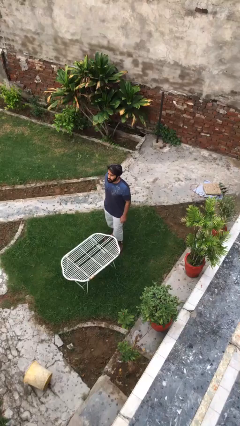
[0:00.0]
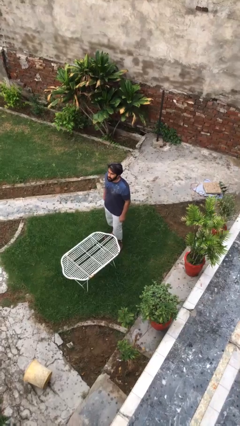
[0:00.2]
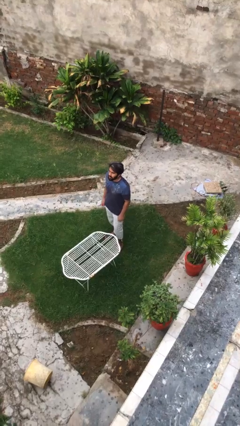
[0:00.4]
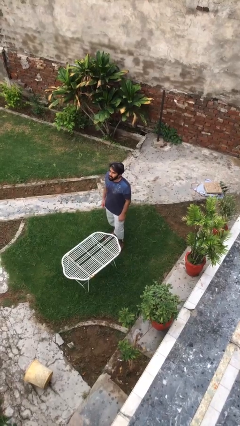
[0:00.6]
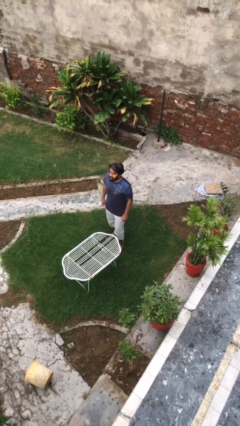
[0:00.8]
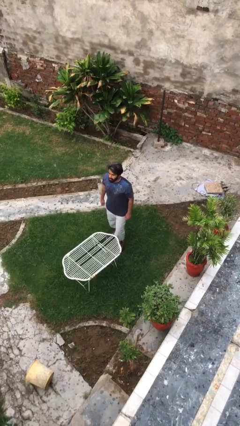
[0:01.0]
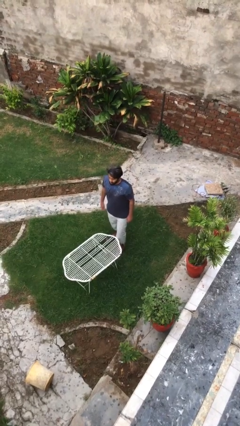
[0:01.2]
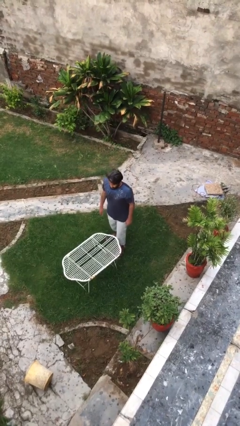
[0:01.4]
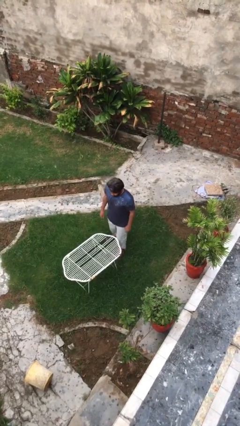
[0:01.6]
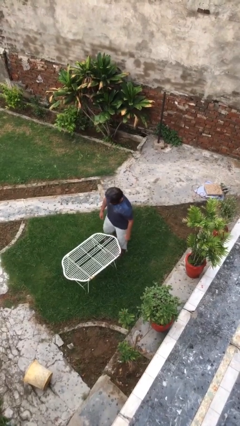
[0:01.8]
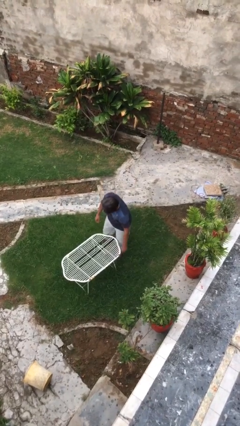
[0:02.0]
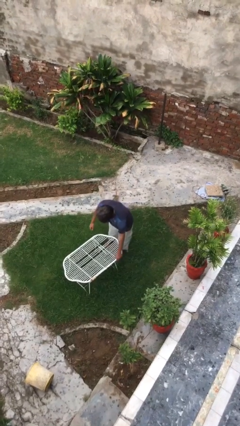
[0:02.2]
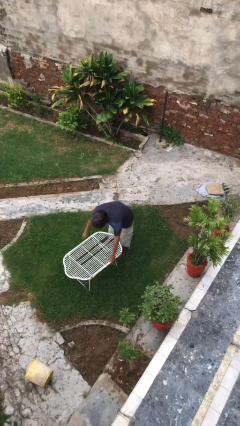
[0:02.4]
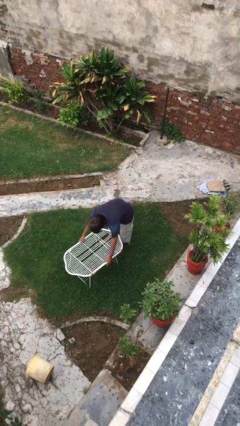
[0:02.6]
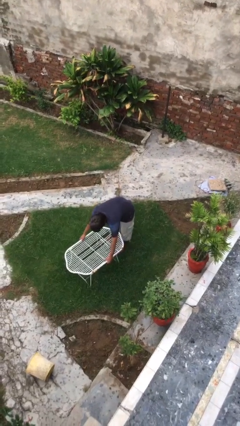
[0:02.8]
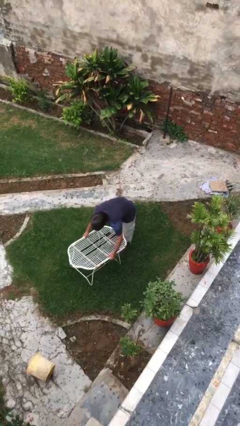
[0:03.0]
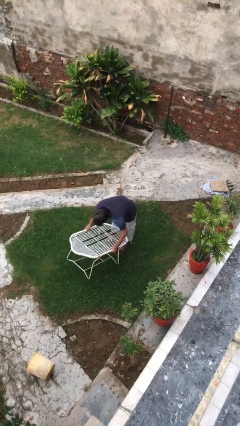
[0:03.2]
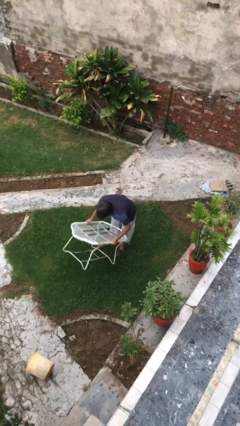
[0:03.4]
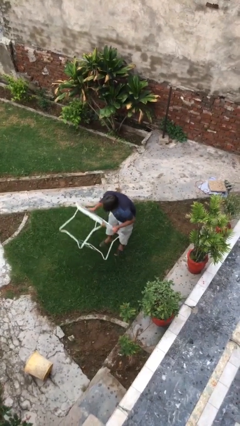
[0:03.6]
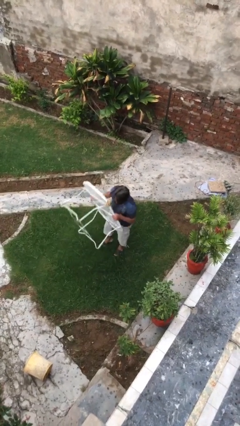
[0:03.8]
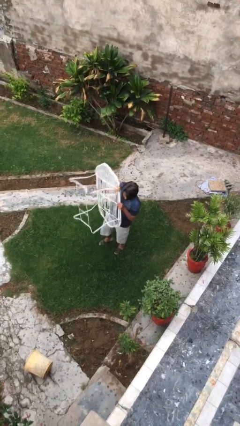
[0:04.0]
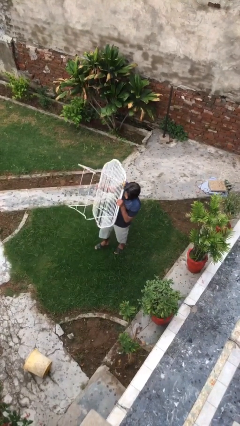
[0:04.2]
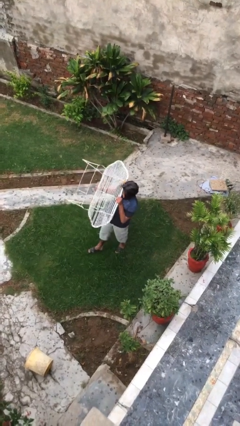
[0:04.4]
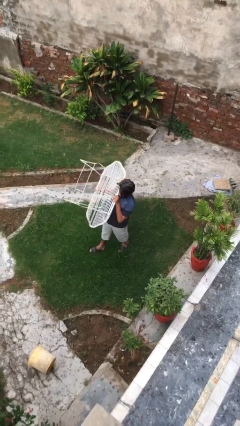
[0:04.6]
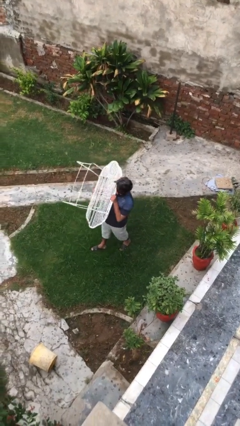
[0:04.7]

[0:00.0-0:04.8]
person picks up object from floor

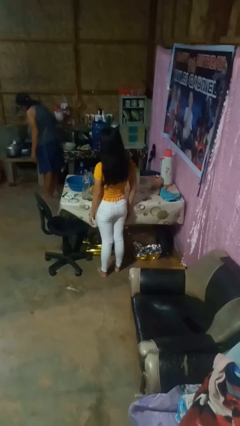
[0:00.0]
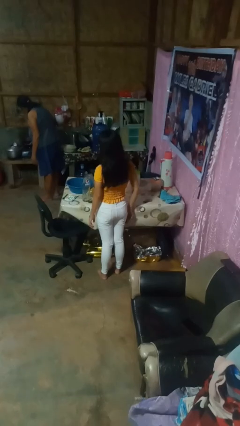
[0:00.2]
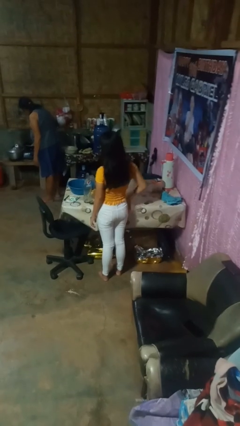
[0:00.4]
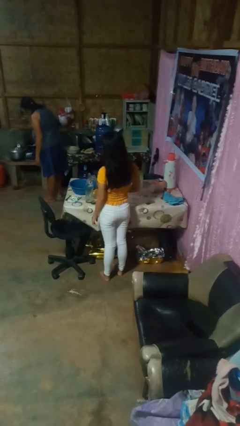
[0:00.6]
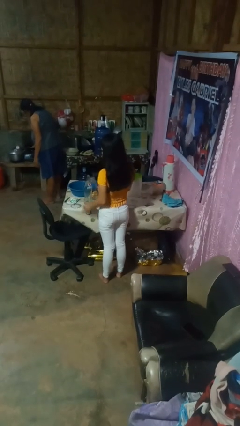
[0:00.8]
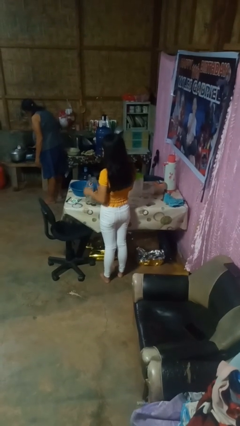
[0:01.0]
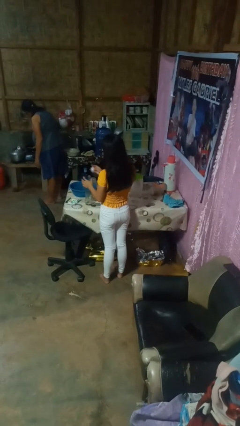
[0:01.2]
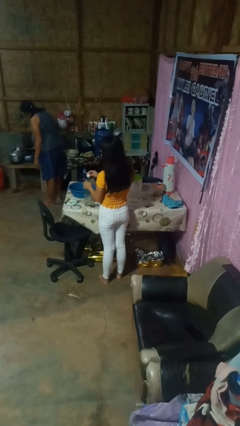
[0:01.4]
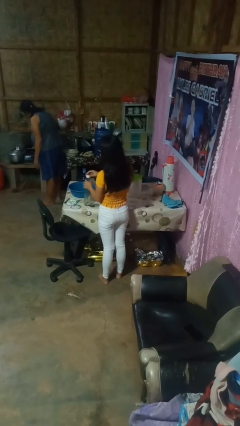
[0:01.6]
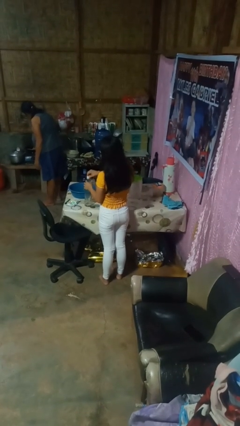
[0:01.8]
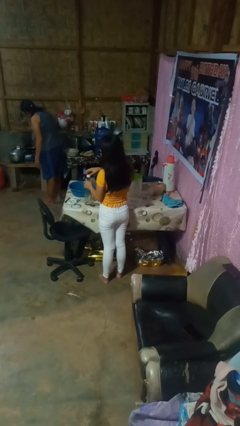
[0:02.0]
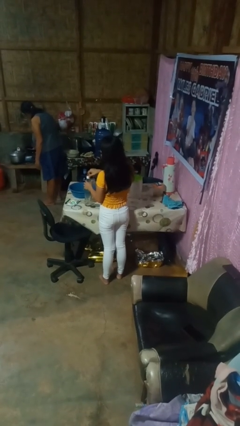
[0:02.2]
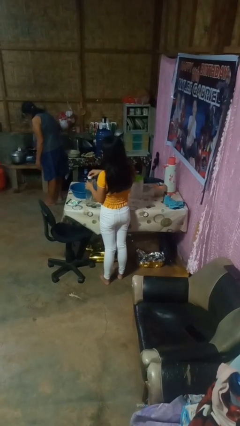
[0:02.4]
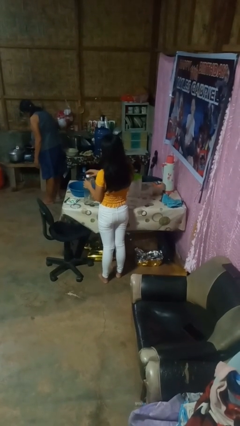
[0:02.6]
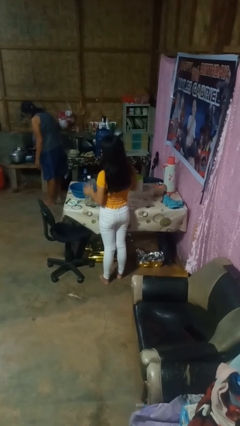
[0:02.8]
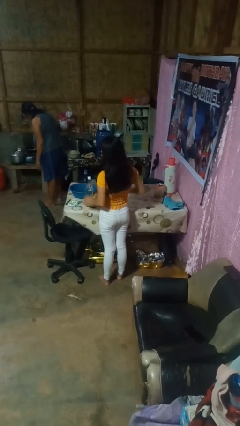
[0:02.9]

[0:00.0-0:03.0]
person screws lid to bottle

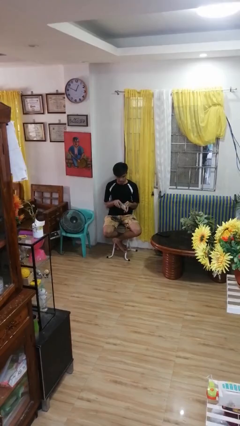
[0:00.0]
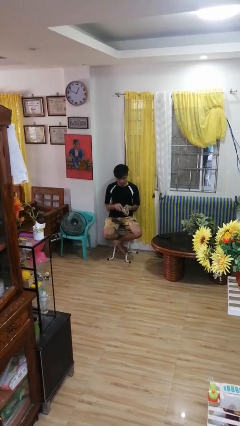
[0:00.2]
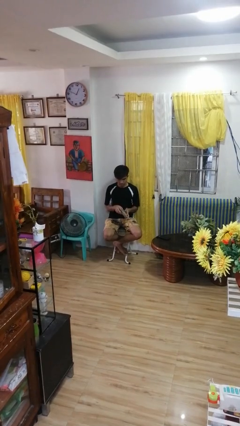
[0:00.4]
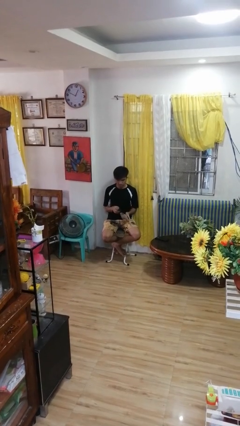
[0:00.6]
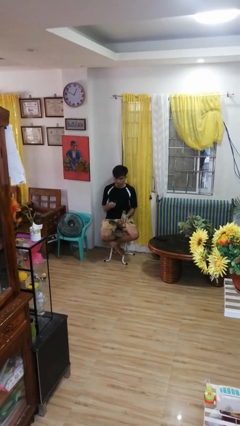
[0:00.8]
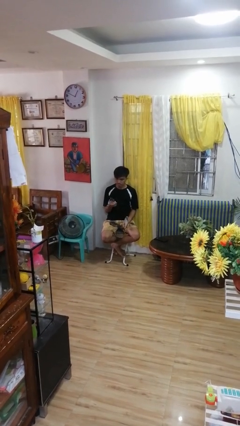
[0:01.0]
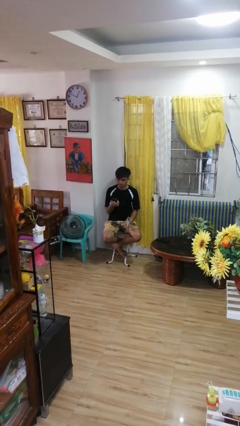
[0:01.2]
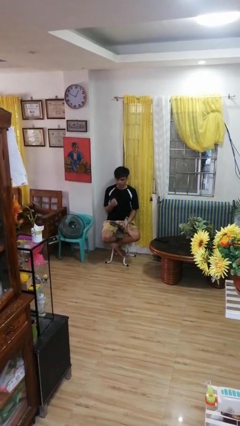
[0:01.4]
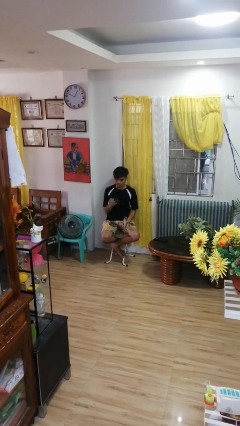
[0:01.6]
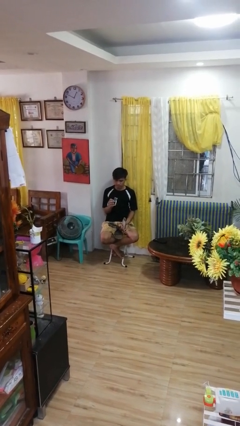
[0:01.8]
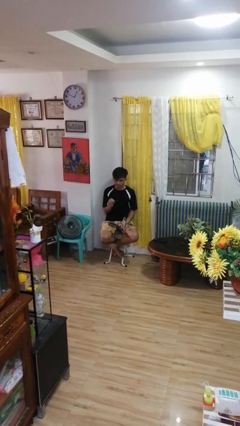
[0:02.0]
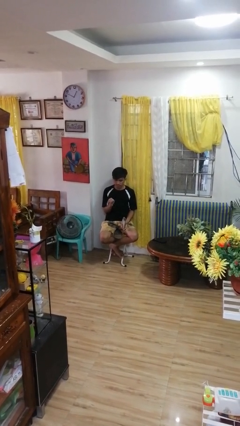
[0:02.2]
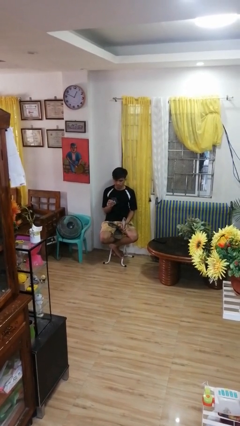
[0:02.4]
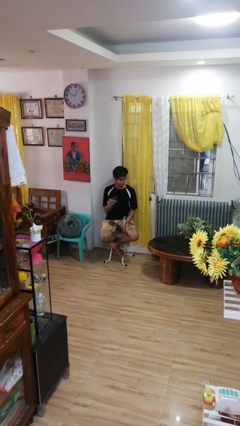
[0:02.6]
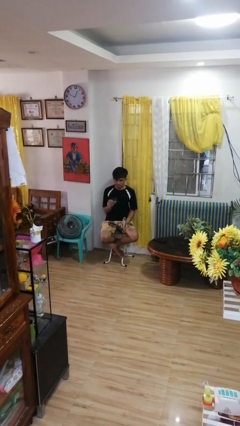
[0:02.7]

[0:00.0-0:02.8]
person takes object from purse

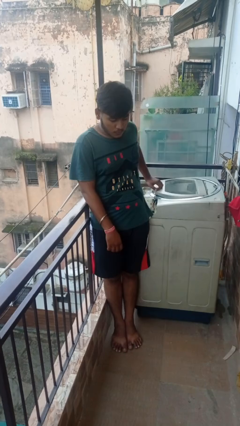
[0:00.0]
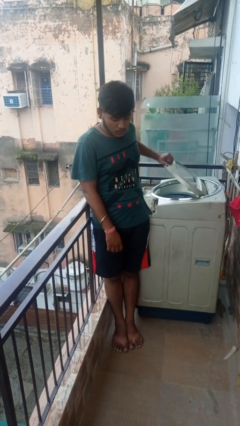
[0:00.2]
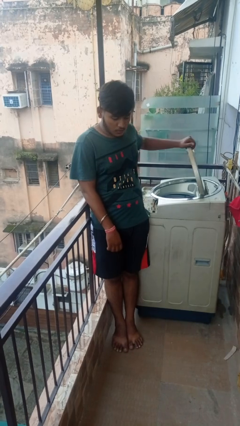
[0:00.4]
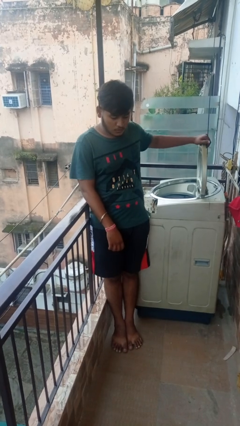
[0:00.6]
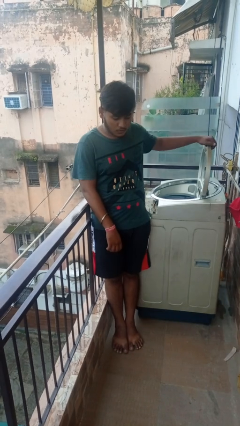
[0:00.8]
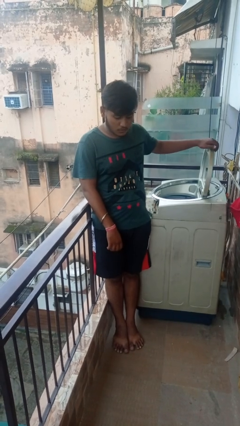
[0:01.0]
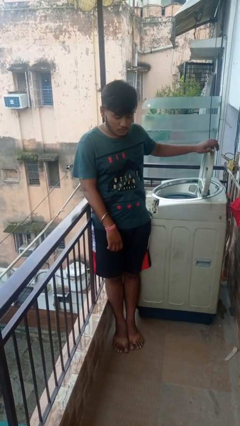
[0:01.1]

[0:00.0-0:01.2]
person opens clothes washer

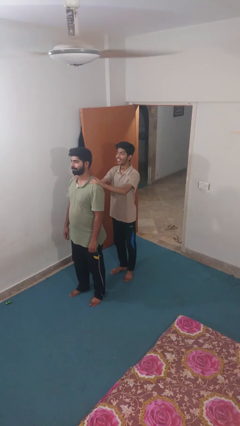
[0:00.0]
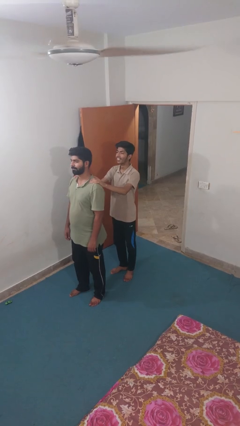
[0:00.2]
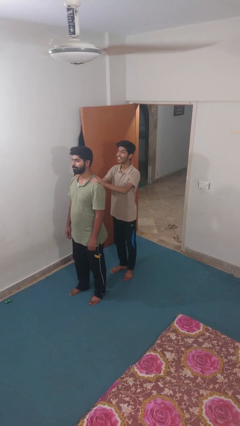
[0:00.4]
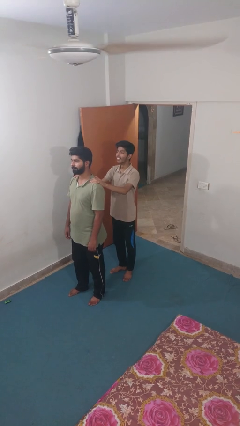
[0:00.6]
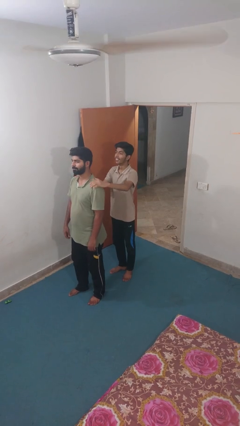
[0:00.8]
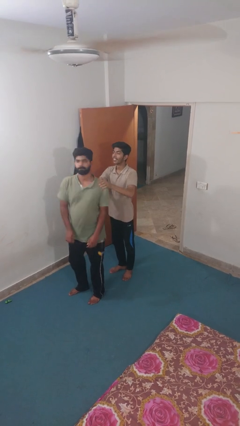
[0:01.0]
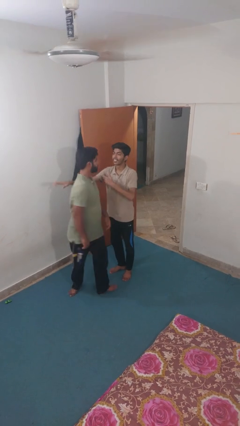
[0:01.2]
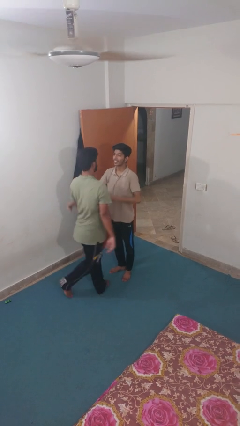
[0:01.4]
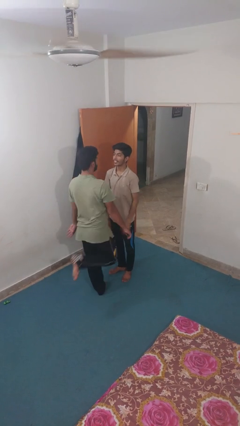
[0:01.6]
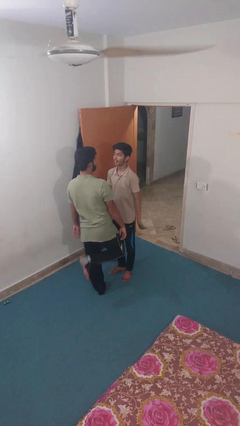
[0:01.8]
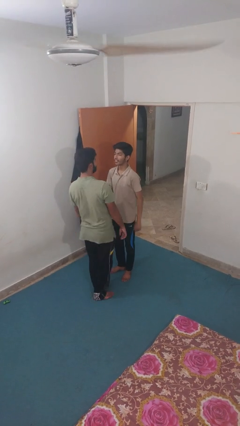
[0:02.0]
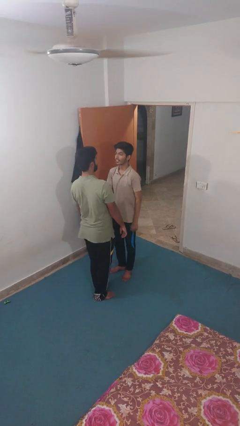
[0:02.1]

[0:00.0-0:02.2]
person spins person around

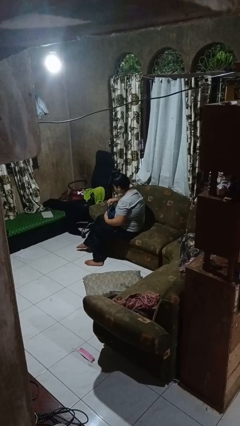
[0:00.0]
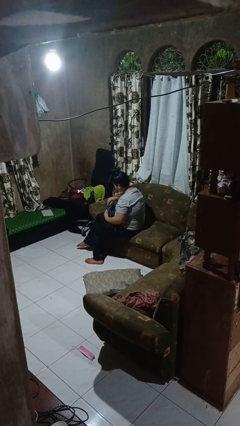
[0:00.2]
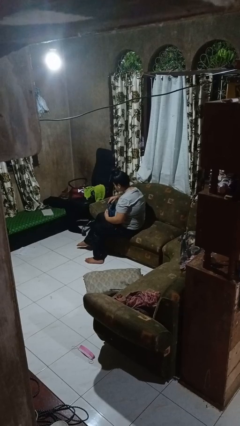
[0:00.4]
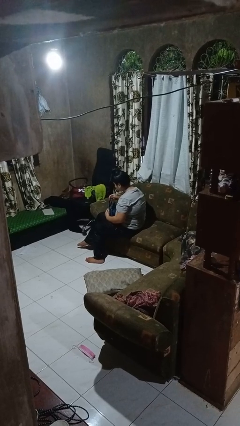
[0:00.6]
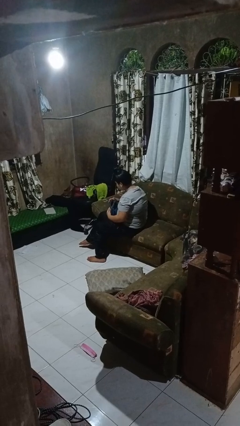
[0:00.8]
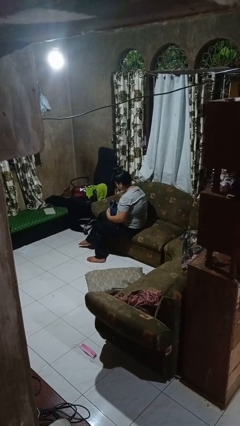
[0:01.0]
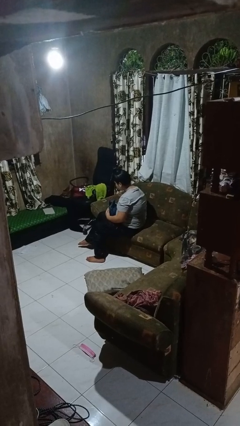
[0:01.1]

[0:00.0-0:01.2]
person puts object into purse

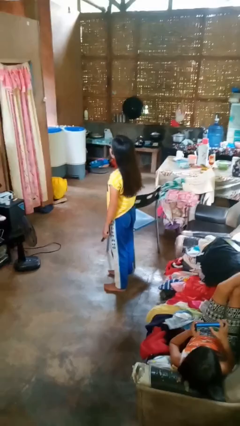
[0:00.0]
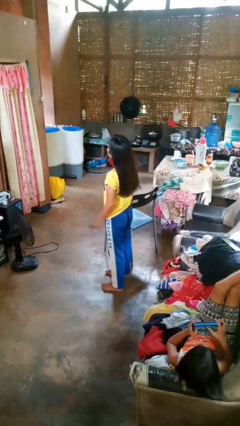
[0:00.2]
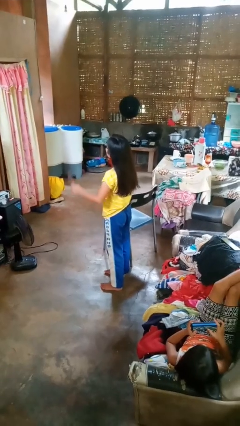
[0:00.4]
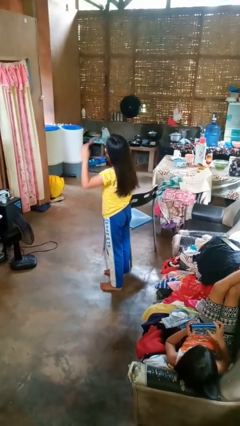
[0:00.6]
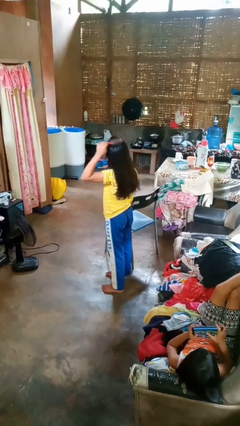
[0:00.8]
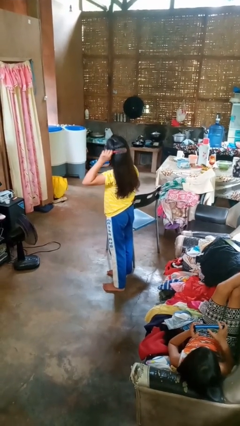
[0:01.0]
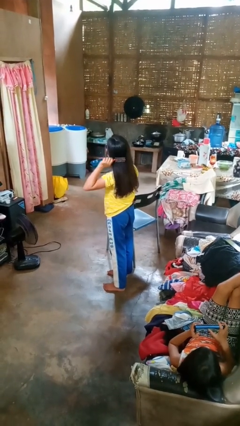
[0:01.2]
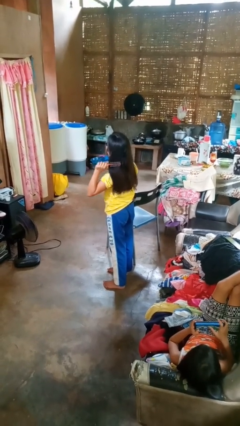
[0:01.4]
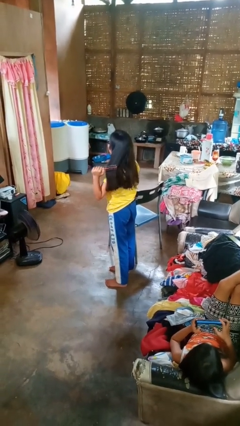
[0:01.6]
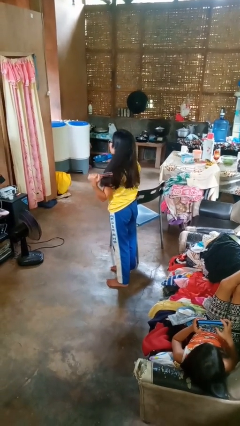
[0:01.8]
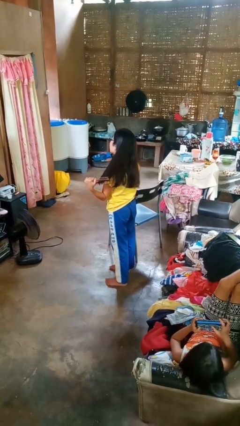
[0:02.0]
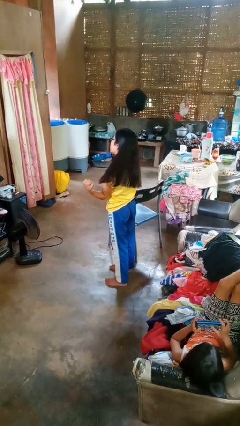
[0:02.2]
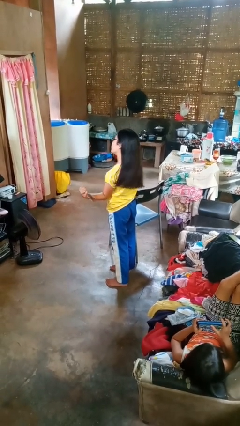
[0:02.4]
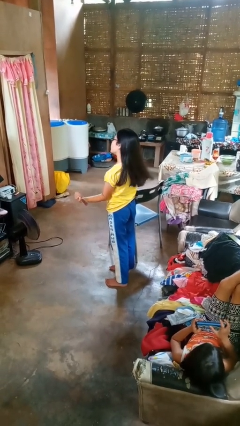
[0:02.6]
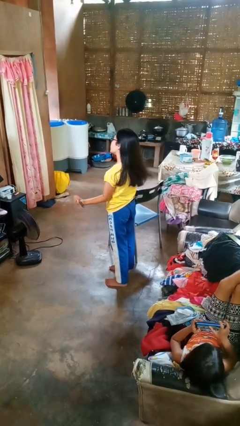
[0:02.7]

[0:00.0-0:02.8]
person brushes hair
